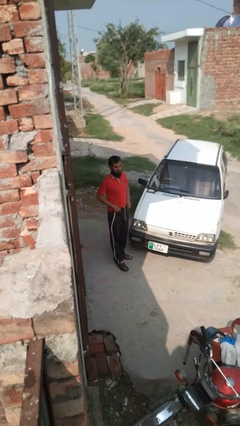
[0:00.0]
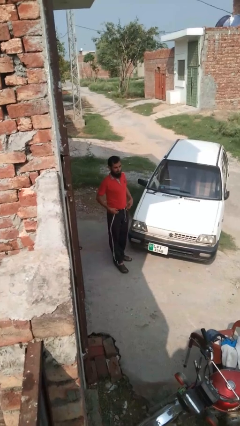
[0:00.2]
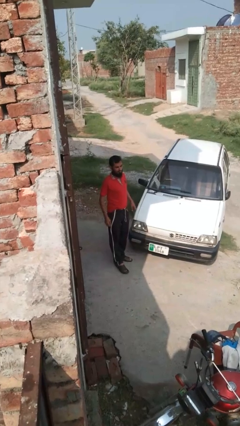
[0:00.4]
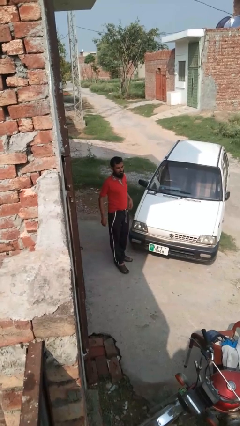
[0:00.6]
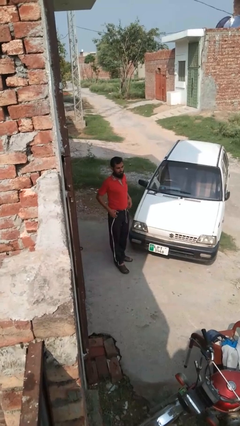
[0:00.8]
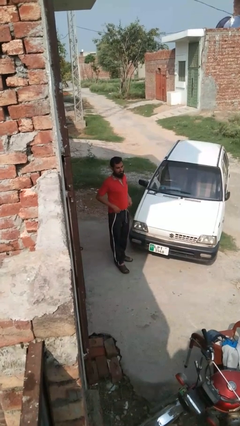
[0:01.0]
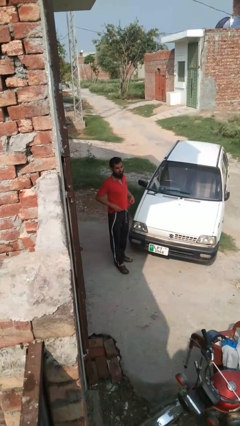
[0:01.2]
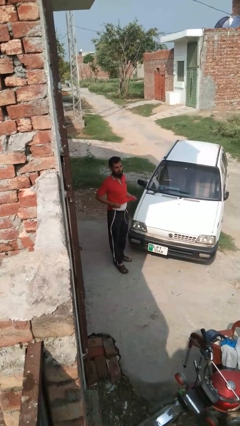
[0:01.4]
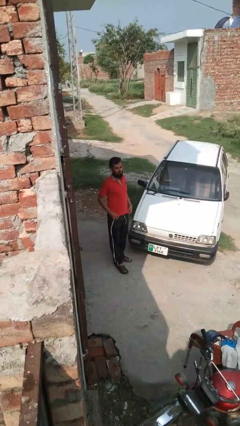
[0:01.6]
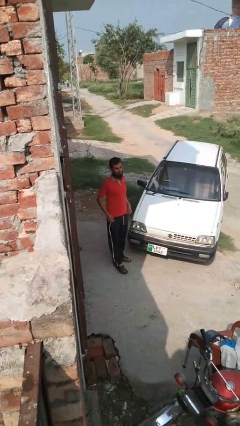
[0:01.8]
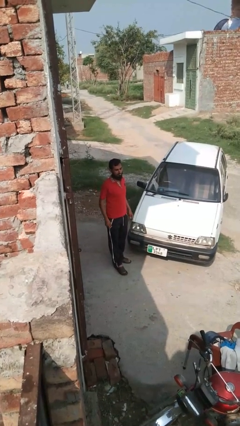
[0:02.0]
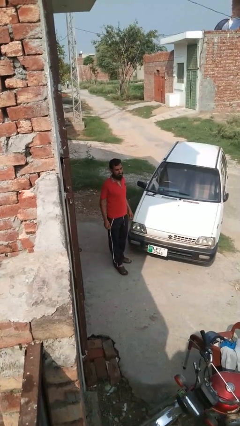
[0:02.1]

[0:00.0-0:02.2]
person untucks shirt

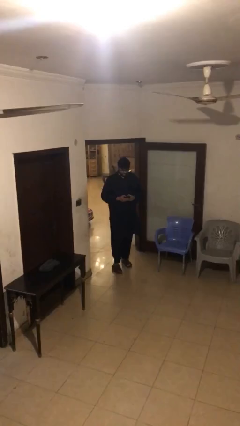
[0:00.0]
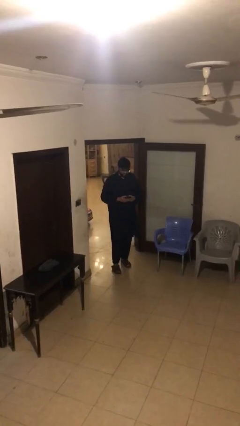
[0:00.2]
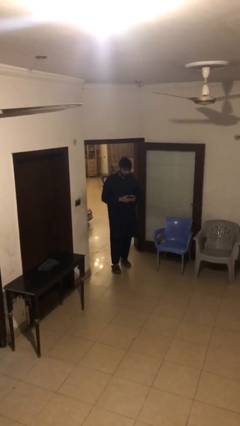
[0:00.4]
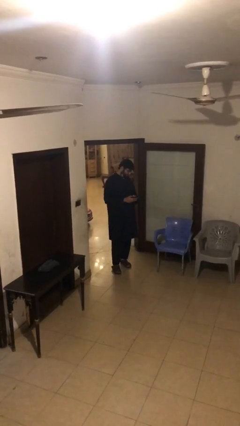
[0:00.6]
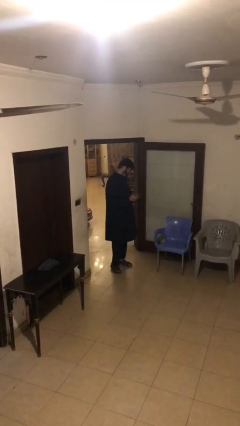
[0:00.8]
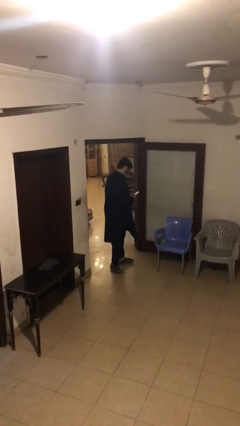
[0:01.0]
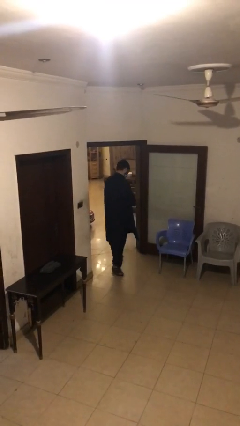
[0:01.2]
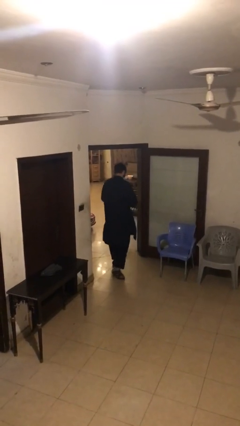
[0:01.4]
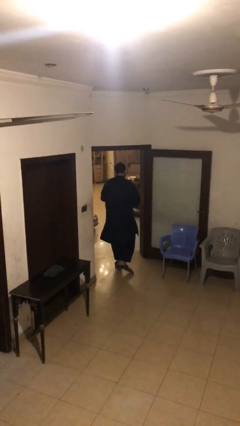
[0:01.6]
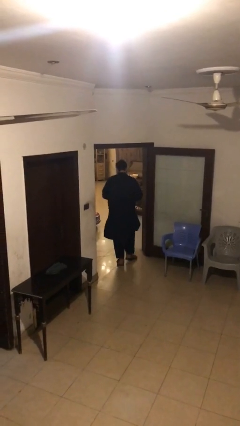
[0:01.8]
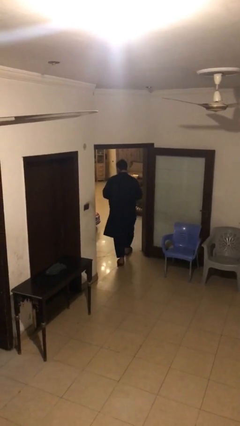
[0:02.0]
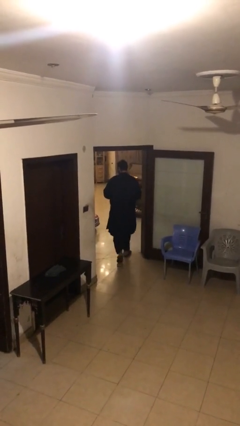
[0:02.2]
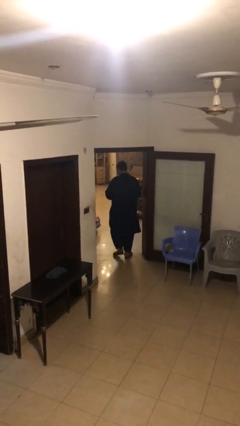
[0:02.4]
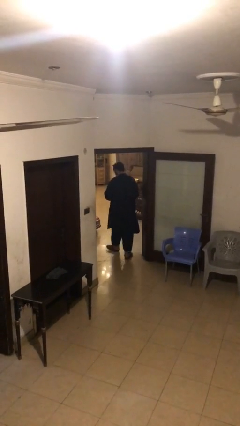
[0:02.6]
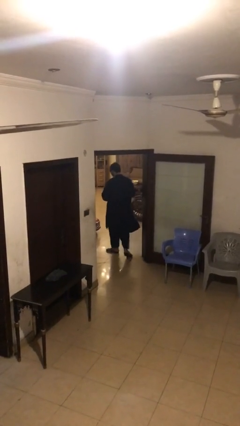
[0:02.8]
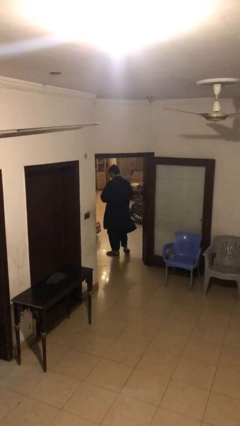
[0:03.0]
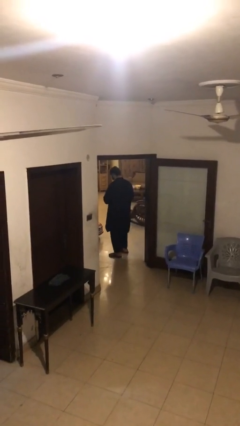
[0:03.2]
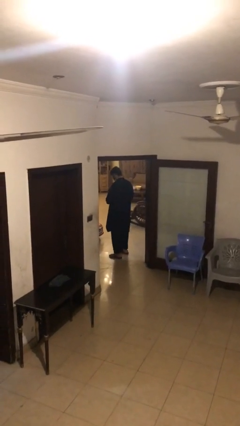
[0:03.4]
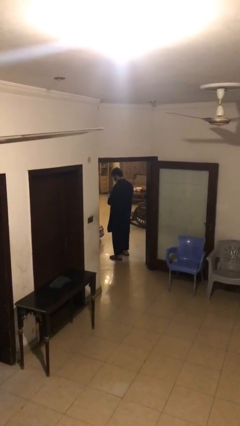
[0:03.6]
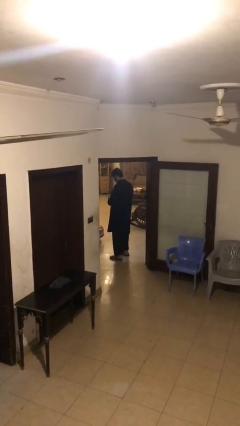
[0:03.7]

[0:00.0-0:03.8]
person exits scene through structure

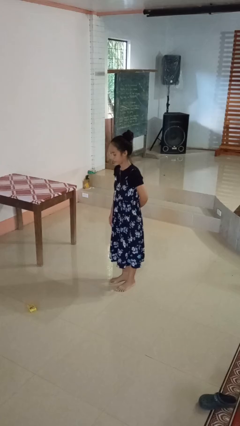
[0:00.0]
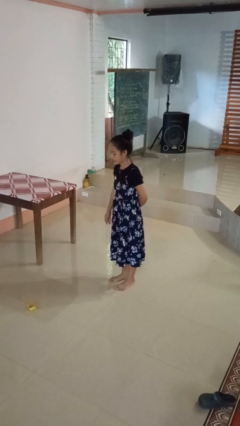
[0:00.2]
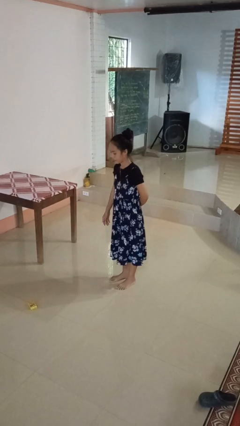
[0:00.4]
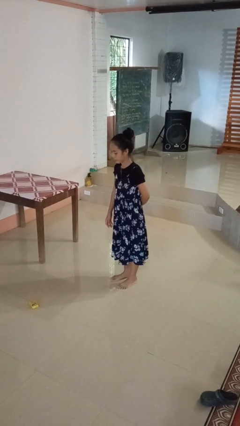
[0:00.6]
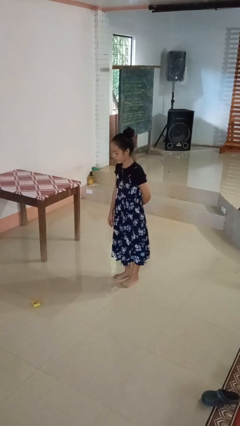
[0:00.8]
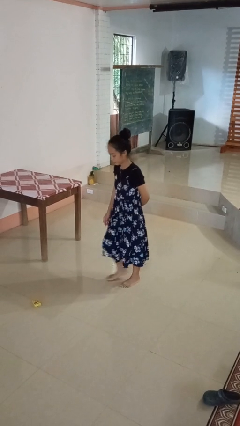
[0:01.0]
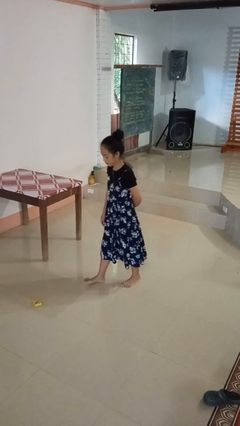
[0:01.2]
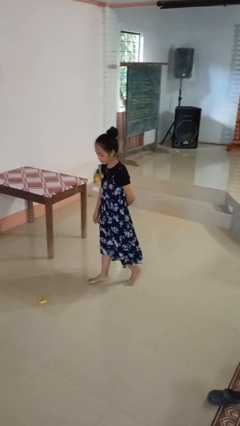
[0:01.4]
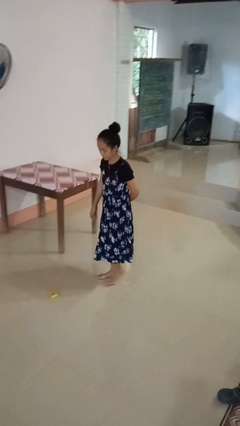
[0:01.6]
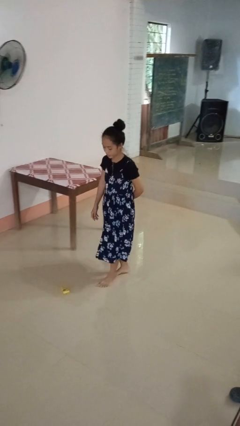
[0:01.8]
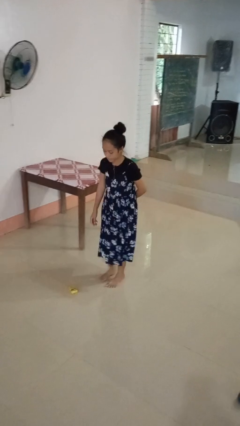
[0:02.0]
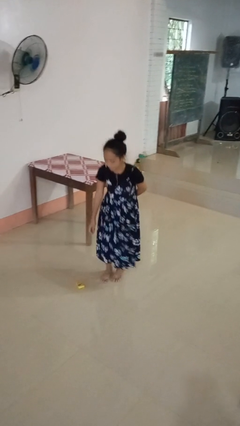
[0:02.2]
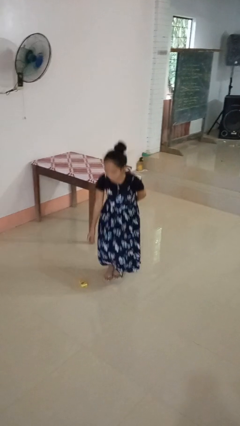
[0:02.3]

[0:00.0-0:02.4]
person throws object to ground

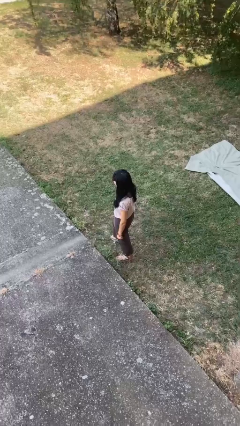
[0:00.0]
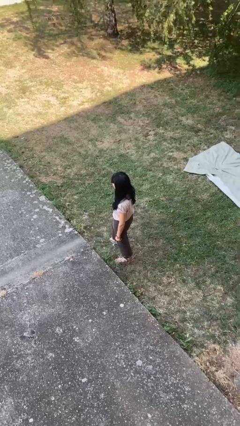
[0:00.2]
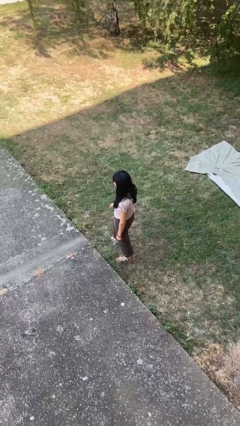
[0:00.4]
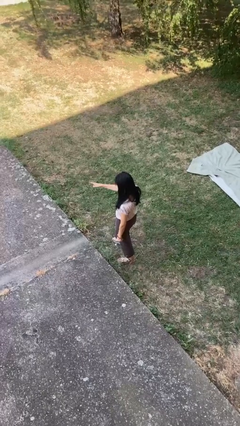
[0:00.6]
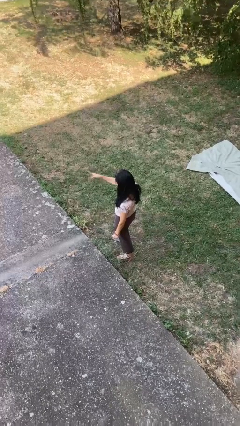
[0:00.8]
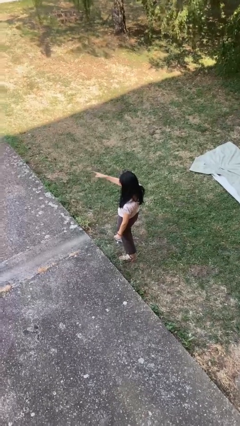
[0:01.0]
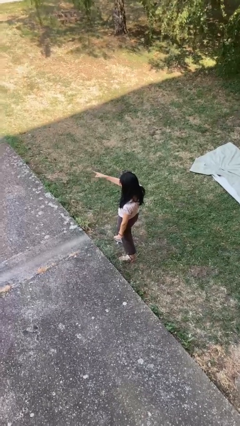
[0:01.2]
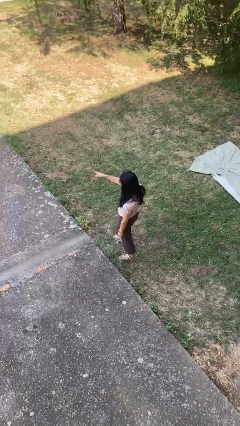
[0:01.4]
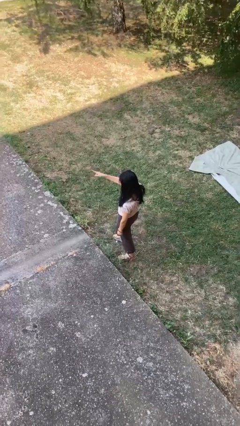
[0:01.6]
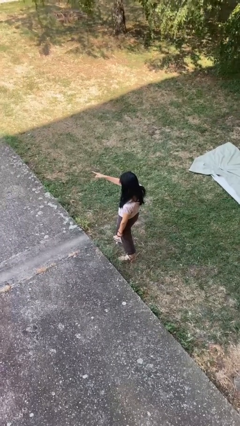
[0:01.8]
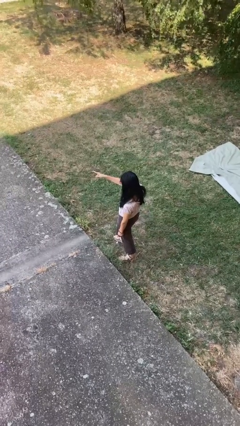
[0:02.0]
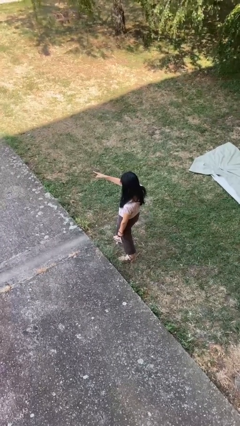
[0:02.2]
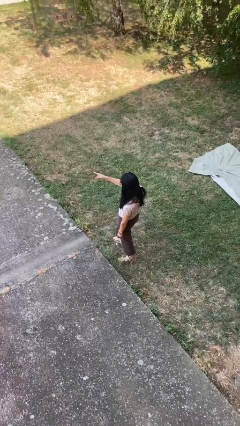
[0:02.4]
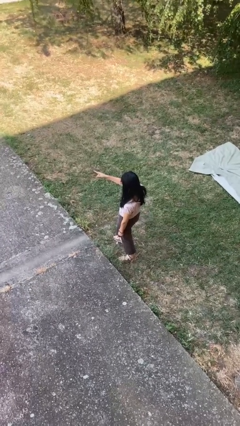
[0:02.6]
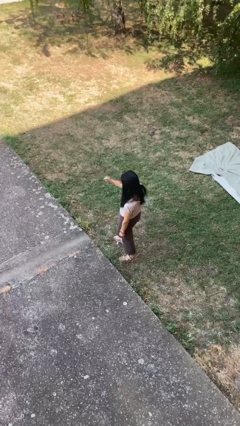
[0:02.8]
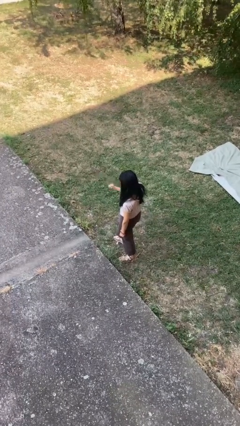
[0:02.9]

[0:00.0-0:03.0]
person points at person

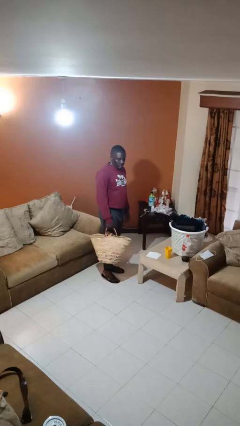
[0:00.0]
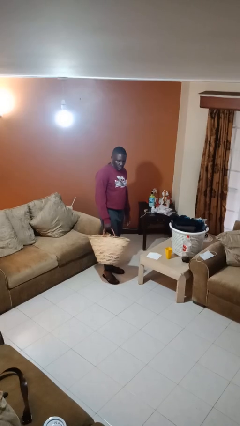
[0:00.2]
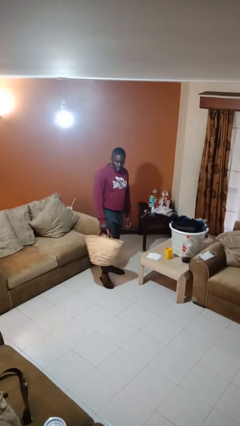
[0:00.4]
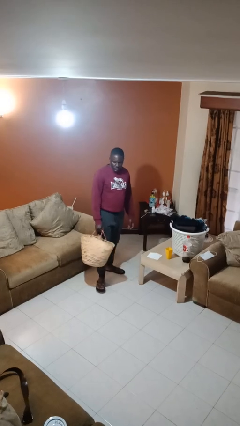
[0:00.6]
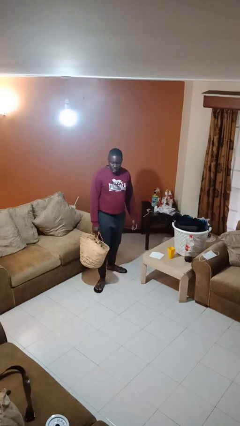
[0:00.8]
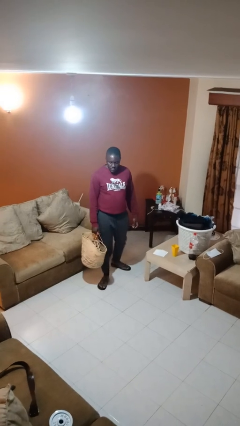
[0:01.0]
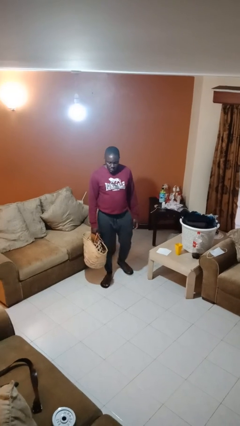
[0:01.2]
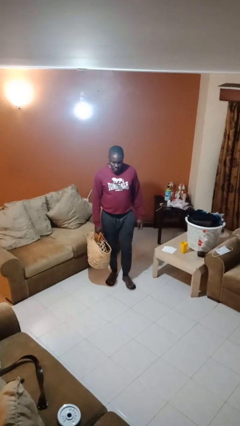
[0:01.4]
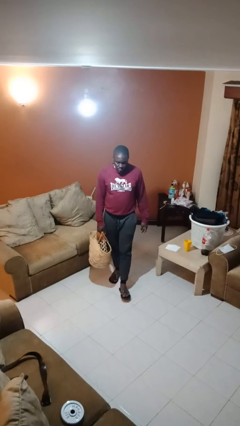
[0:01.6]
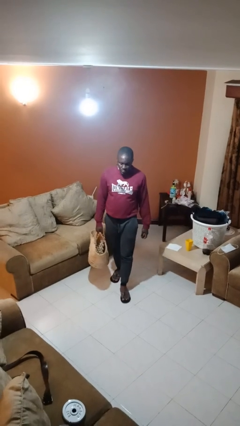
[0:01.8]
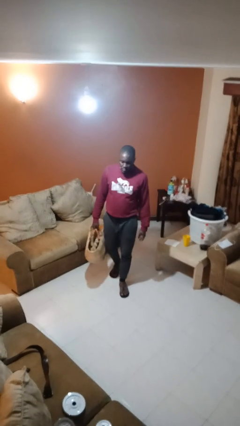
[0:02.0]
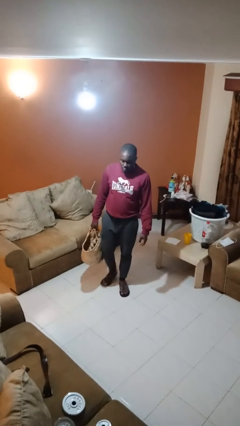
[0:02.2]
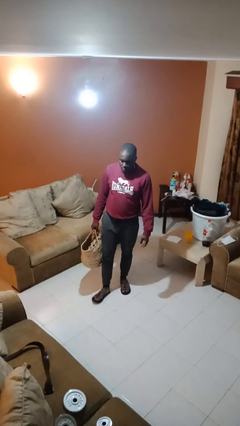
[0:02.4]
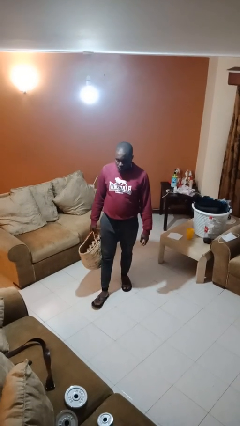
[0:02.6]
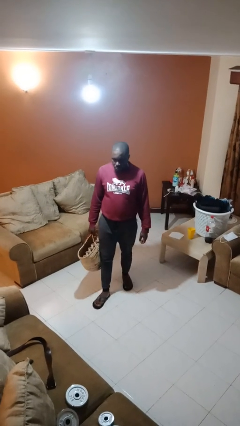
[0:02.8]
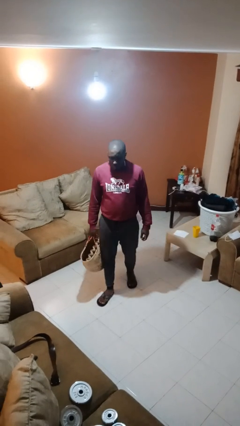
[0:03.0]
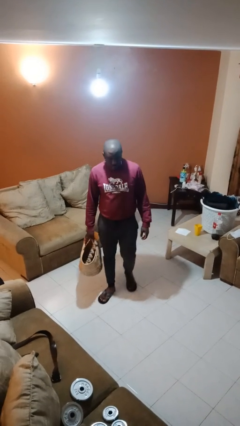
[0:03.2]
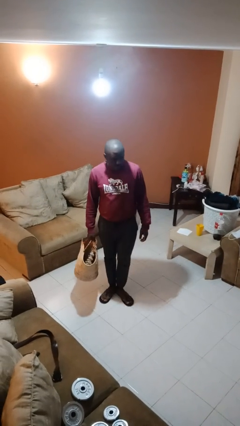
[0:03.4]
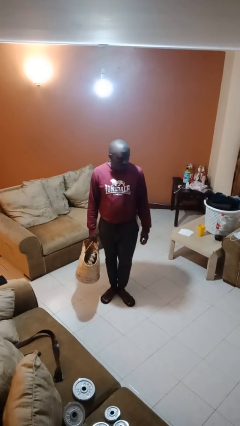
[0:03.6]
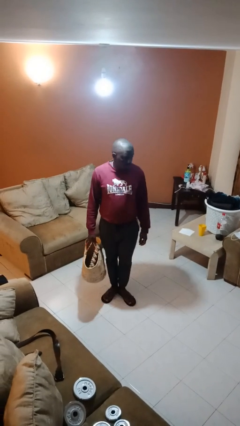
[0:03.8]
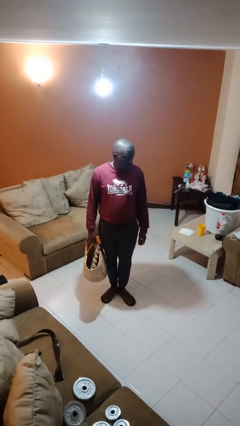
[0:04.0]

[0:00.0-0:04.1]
person carries groceries

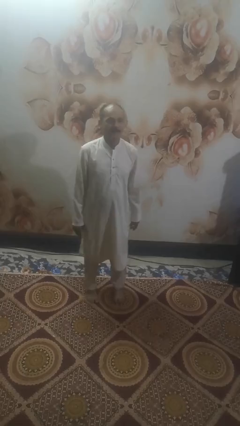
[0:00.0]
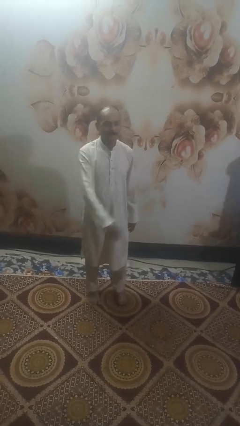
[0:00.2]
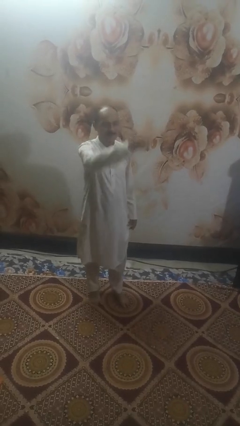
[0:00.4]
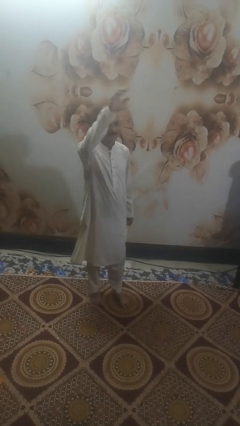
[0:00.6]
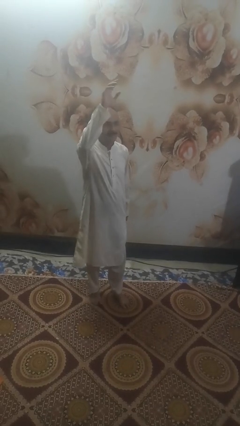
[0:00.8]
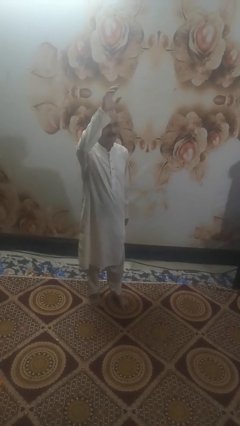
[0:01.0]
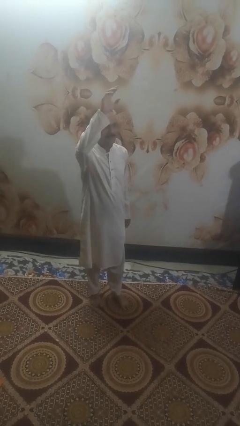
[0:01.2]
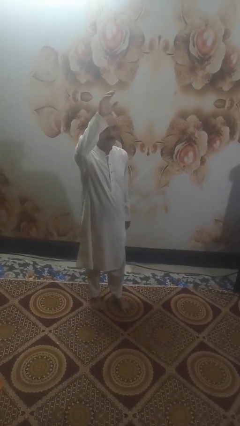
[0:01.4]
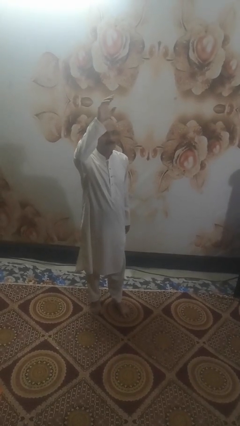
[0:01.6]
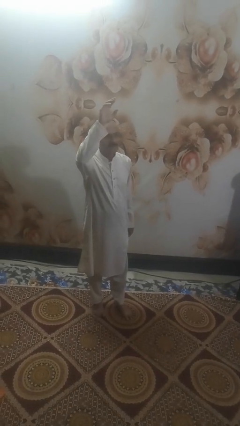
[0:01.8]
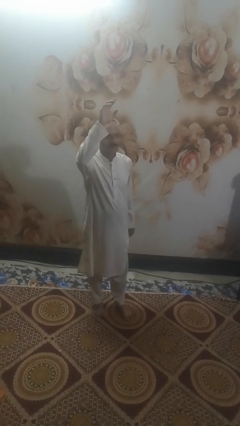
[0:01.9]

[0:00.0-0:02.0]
person gestures swipe up
